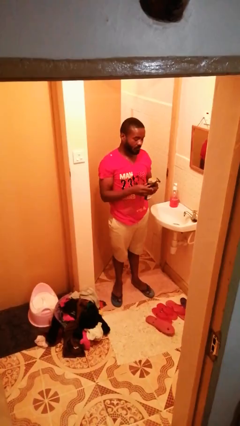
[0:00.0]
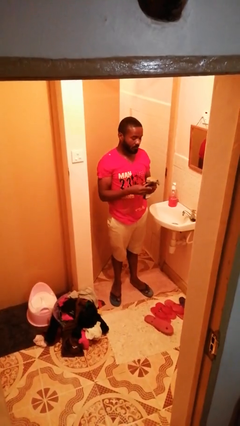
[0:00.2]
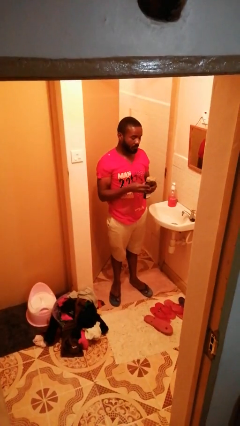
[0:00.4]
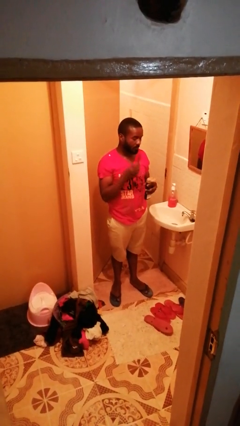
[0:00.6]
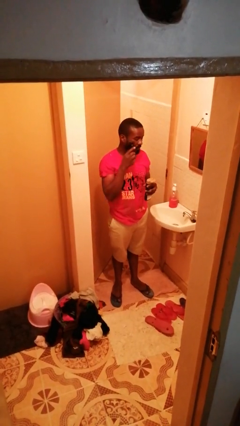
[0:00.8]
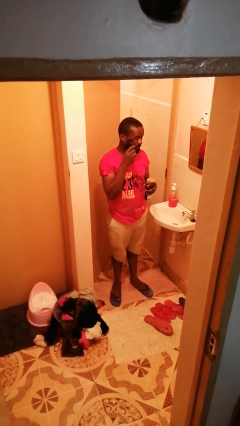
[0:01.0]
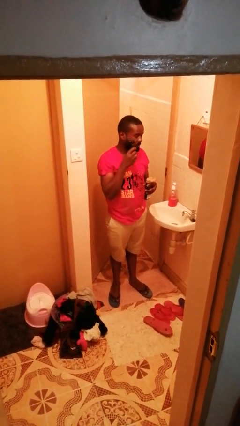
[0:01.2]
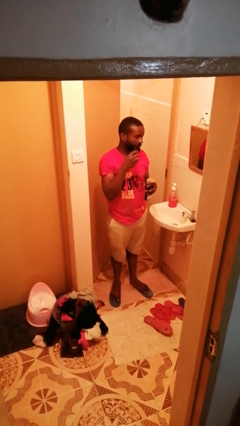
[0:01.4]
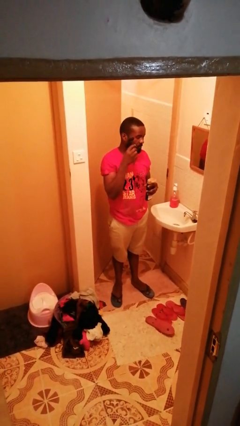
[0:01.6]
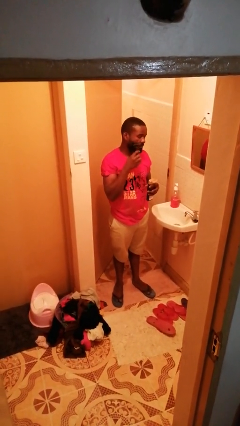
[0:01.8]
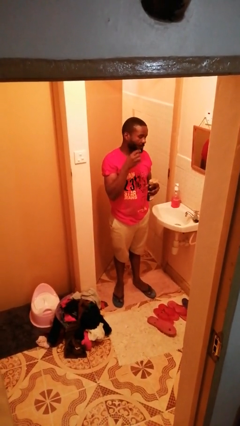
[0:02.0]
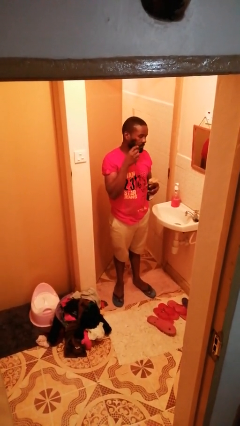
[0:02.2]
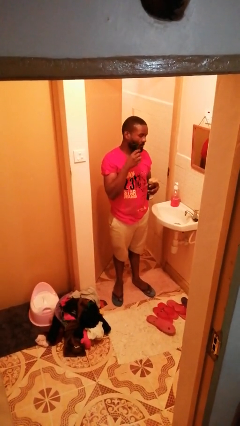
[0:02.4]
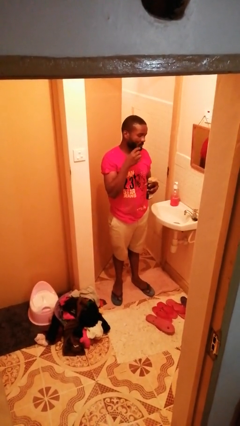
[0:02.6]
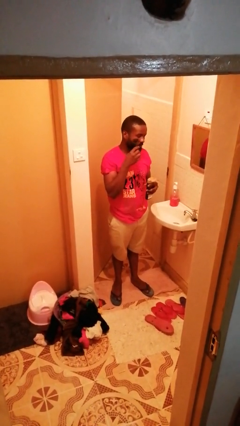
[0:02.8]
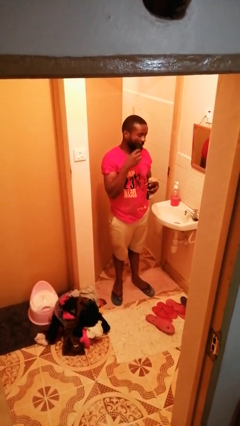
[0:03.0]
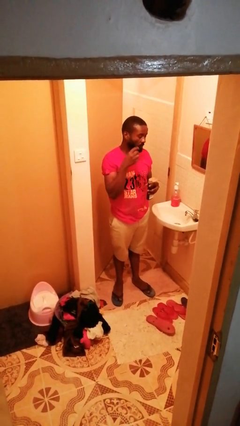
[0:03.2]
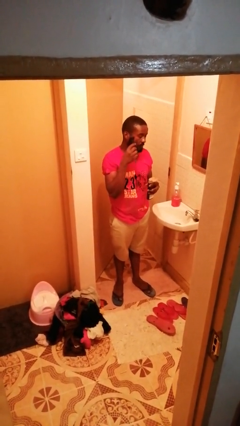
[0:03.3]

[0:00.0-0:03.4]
person shaves face

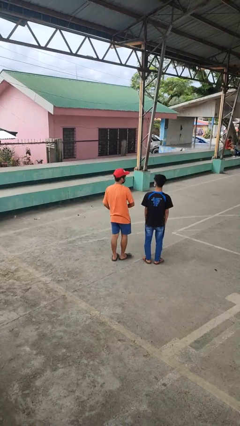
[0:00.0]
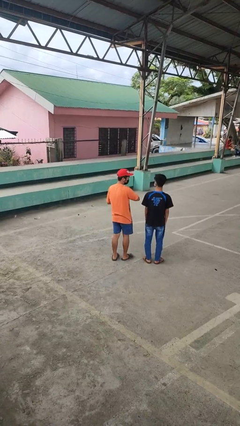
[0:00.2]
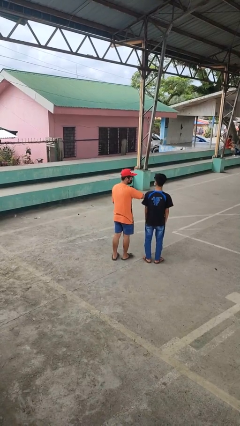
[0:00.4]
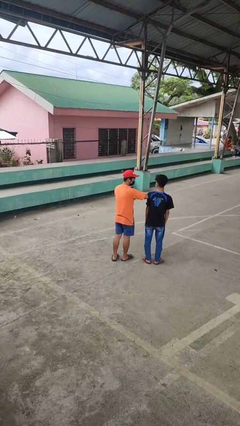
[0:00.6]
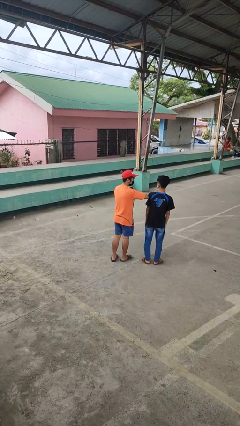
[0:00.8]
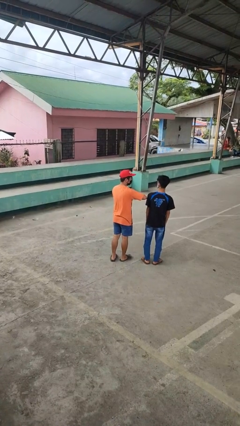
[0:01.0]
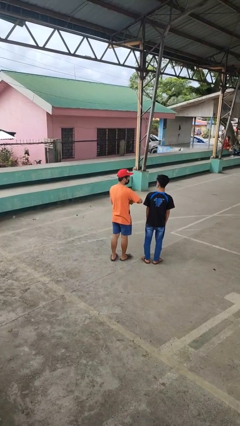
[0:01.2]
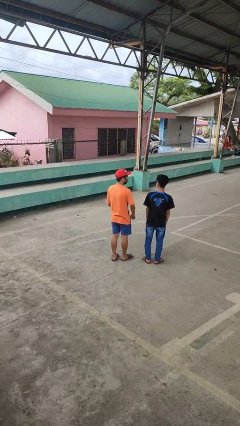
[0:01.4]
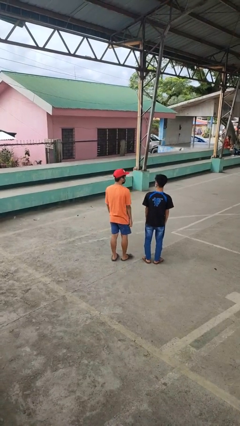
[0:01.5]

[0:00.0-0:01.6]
person nudges person with elbow

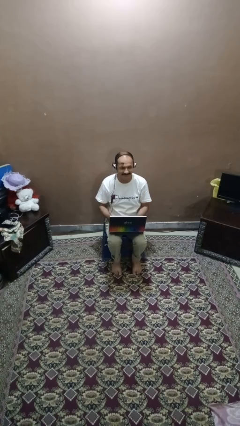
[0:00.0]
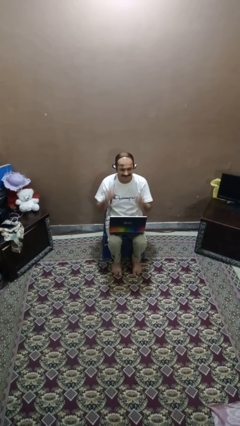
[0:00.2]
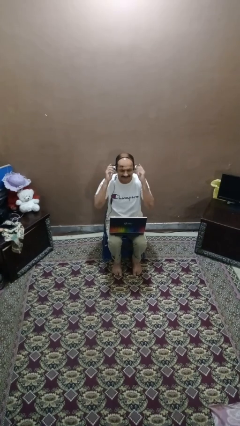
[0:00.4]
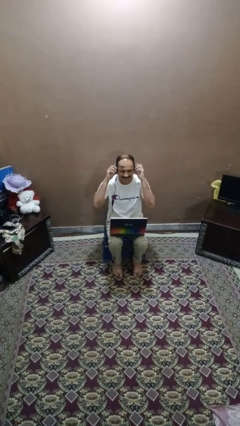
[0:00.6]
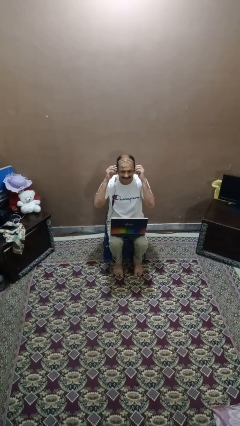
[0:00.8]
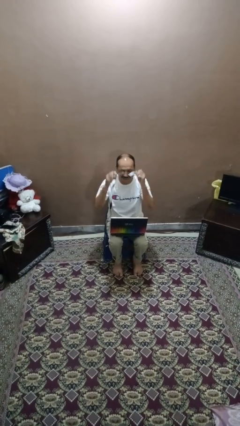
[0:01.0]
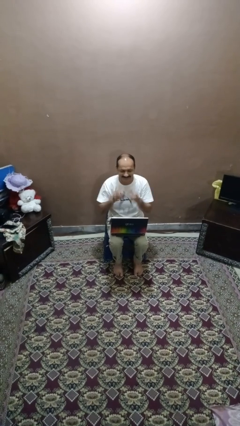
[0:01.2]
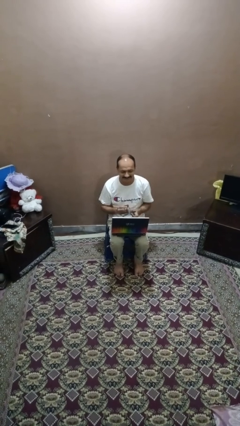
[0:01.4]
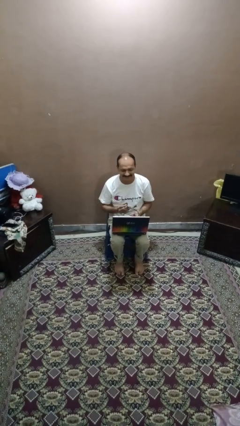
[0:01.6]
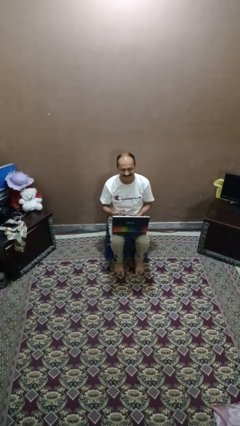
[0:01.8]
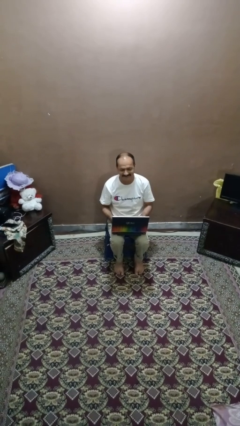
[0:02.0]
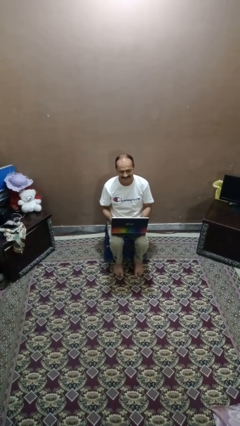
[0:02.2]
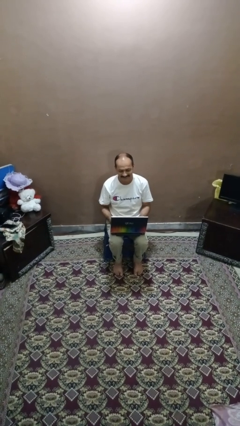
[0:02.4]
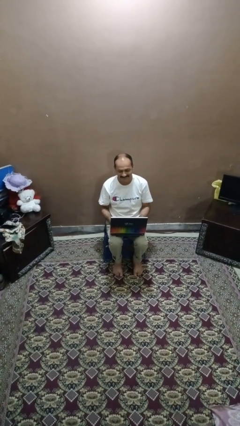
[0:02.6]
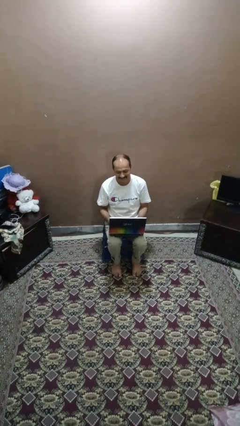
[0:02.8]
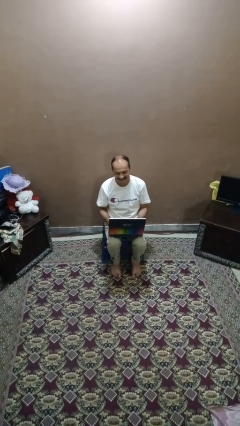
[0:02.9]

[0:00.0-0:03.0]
person takes off headphones

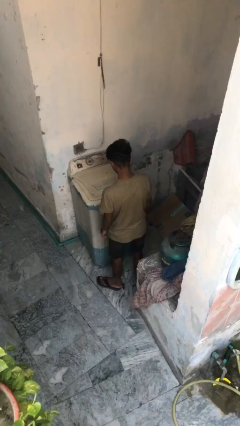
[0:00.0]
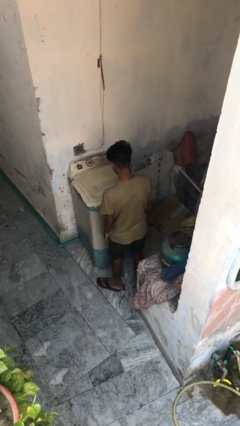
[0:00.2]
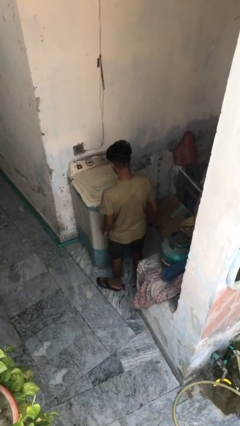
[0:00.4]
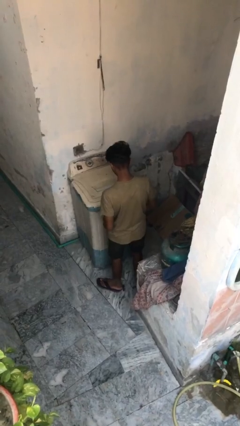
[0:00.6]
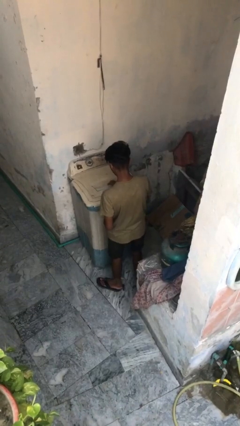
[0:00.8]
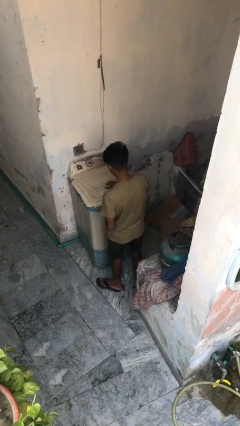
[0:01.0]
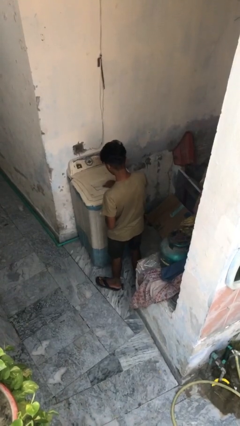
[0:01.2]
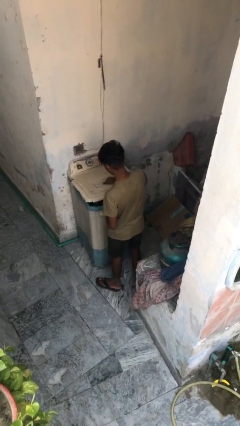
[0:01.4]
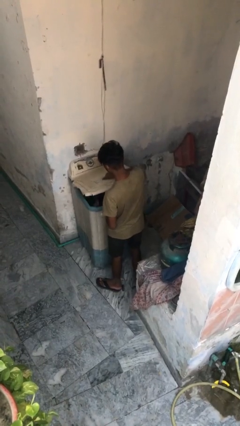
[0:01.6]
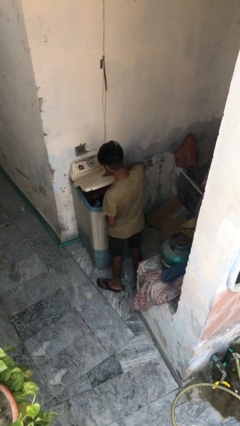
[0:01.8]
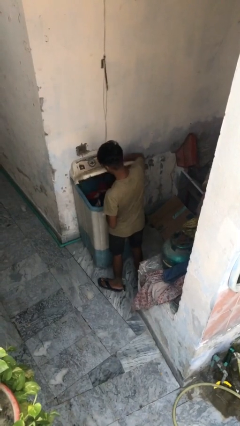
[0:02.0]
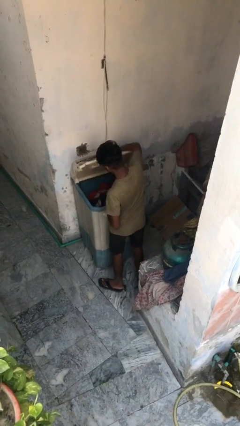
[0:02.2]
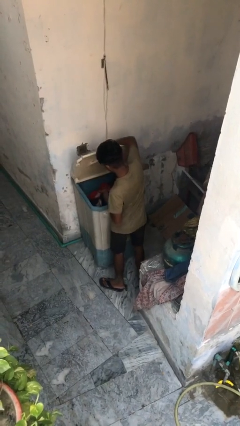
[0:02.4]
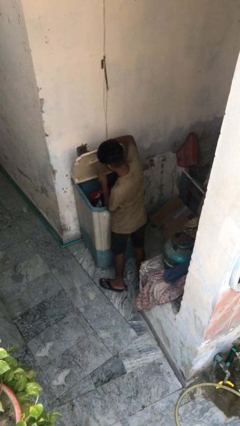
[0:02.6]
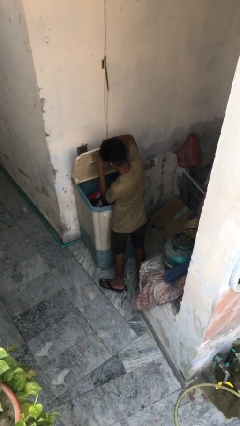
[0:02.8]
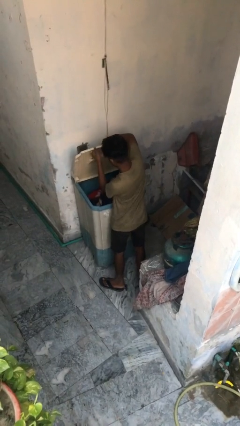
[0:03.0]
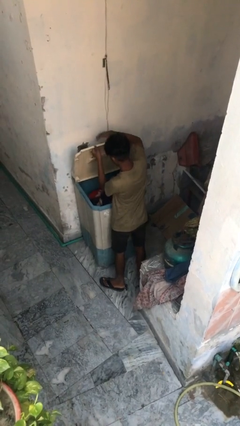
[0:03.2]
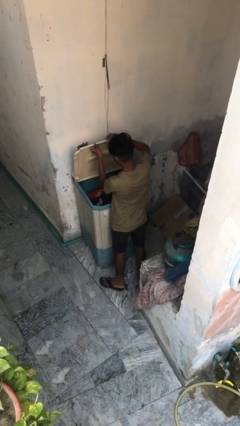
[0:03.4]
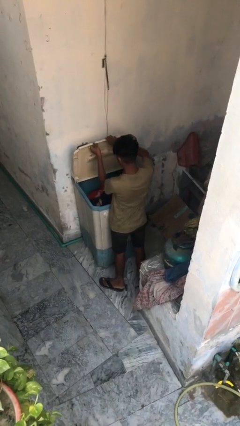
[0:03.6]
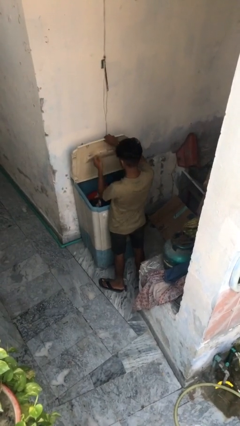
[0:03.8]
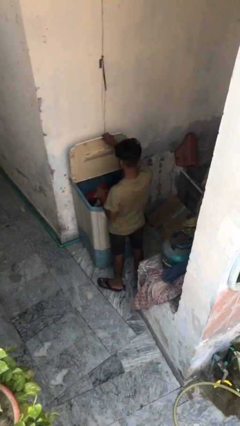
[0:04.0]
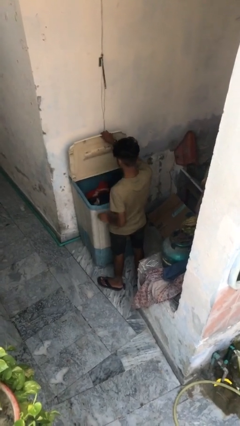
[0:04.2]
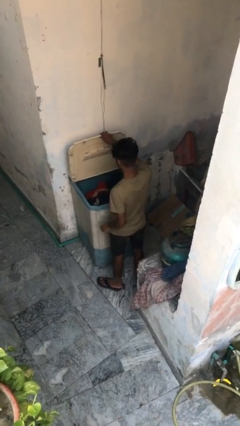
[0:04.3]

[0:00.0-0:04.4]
person opens clothes washer

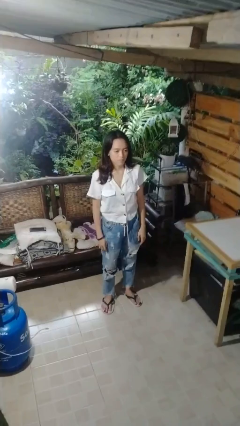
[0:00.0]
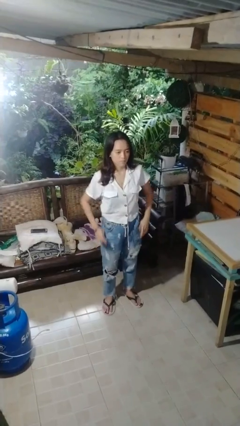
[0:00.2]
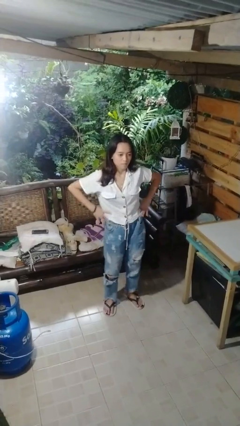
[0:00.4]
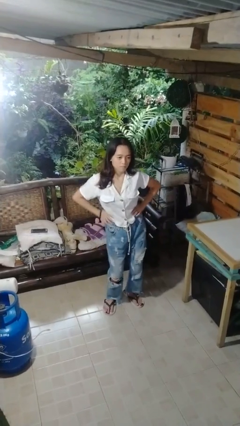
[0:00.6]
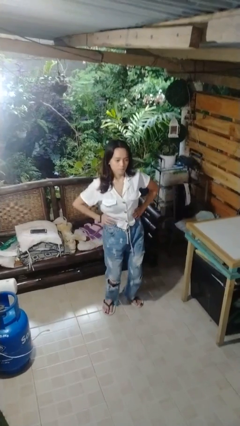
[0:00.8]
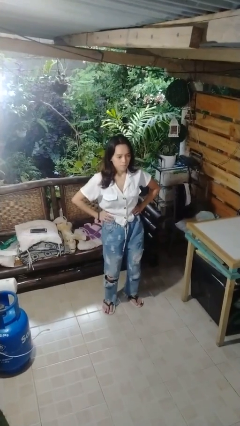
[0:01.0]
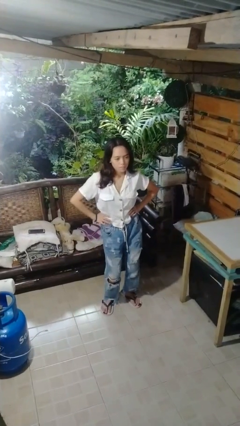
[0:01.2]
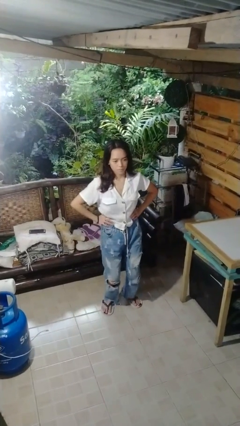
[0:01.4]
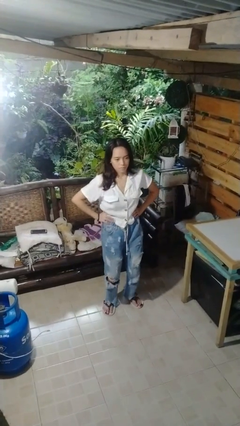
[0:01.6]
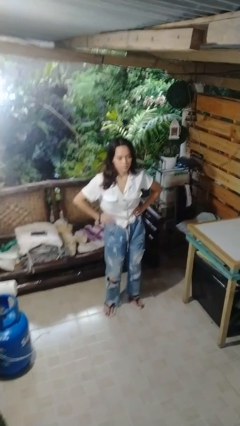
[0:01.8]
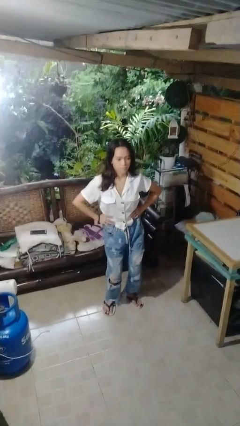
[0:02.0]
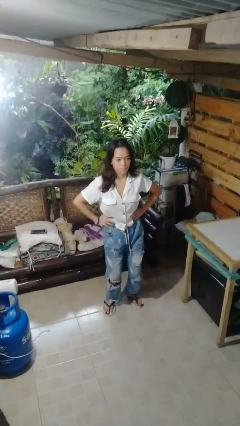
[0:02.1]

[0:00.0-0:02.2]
person wiggles hips

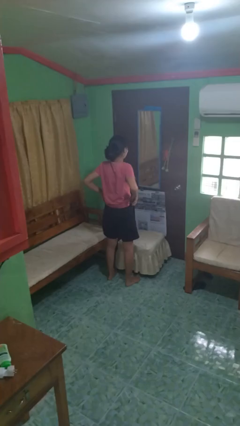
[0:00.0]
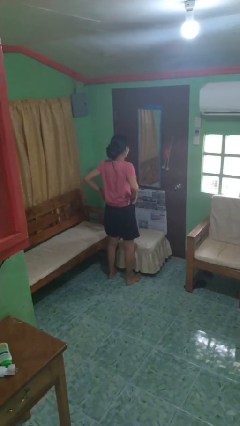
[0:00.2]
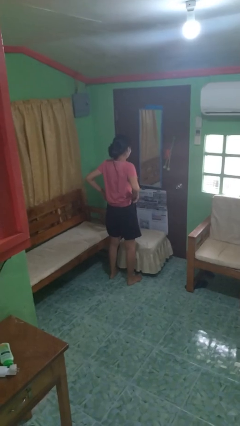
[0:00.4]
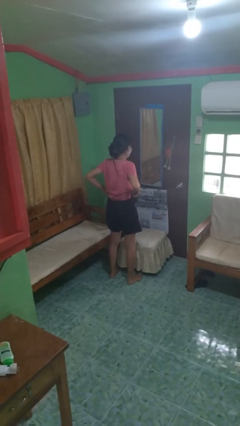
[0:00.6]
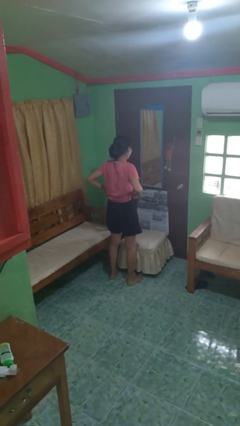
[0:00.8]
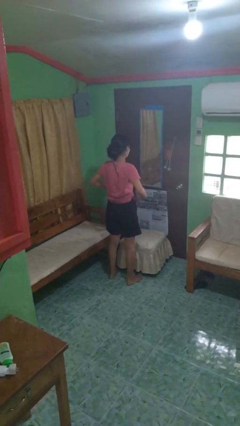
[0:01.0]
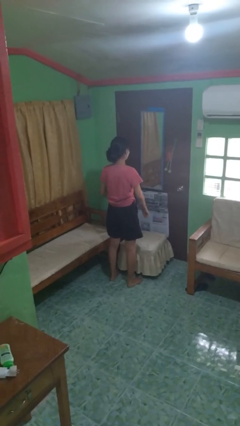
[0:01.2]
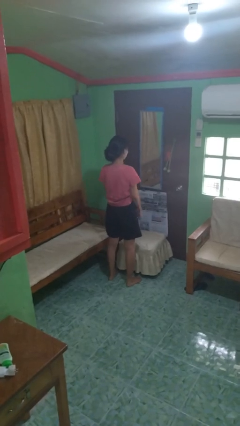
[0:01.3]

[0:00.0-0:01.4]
person hikes up pants

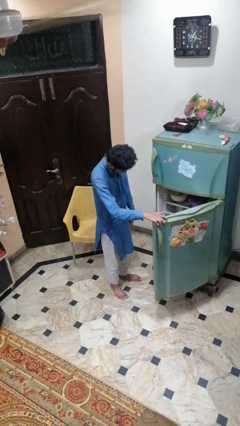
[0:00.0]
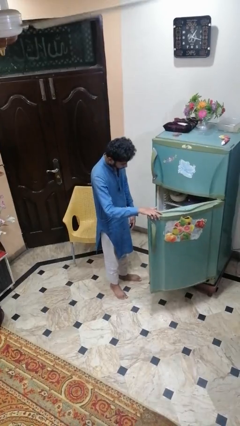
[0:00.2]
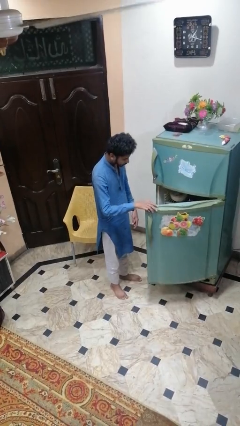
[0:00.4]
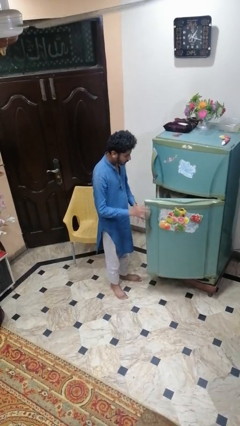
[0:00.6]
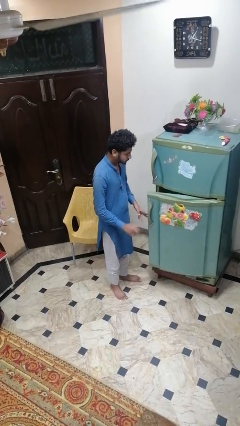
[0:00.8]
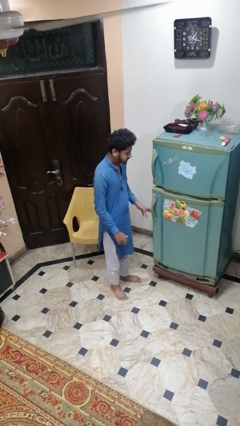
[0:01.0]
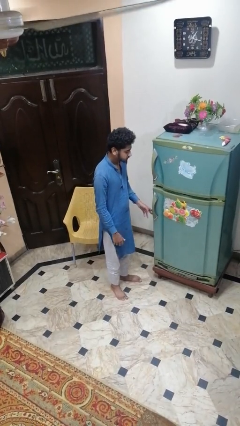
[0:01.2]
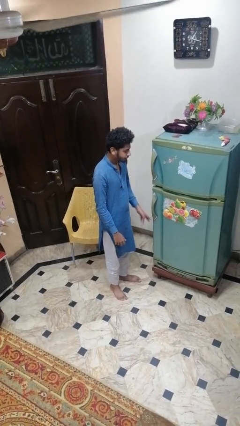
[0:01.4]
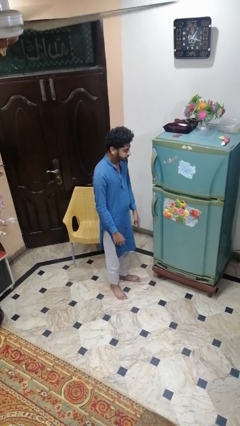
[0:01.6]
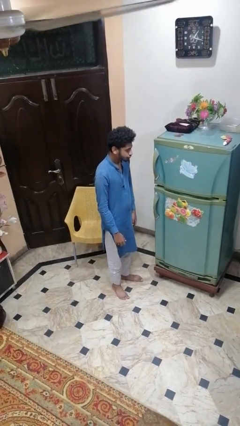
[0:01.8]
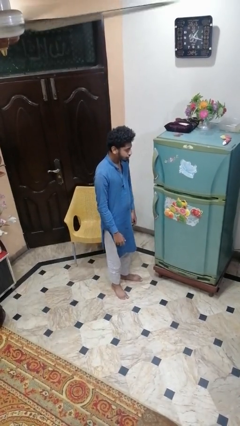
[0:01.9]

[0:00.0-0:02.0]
person closes refrigerator
